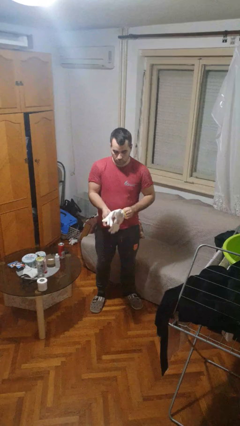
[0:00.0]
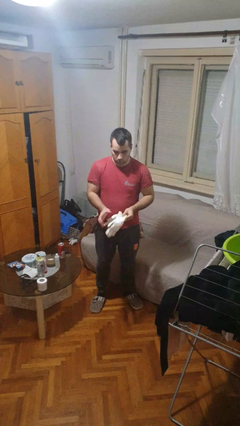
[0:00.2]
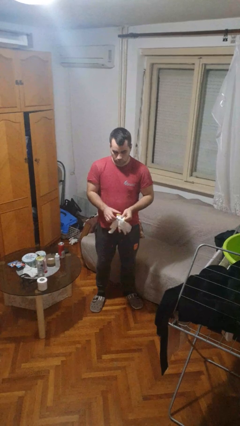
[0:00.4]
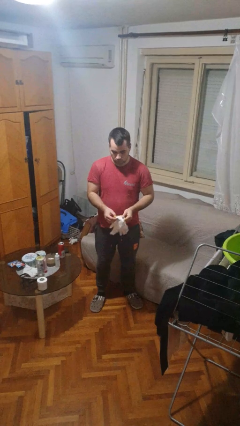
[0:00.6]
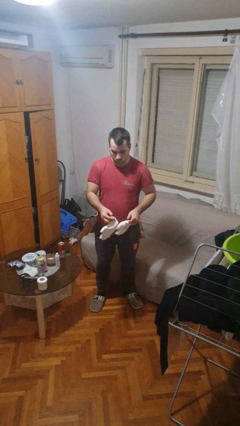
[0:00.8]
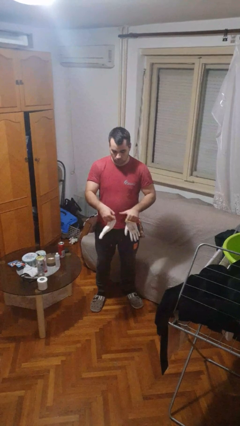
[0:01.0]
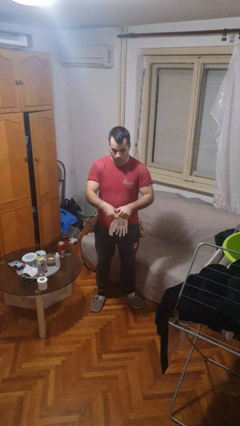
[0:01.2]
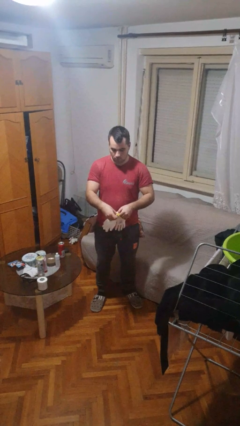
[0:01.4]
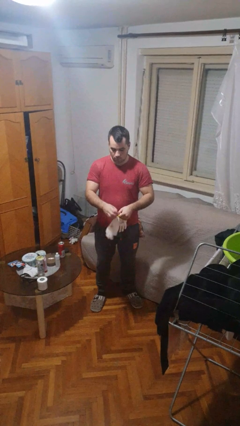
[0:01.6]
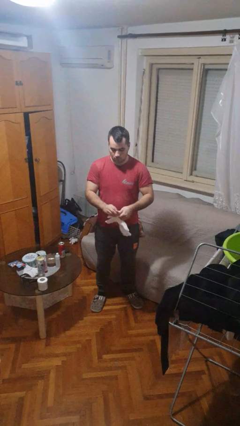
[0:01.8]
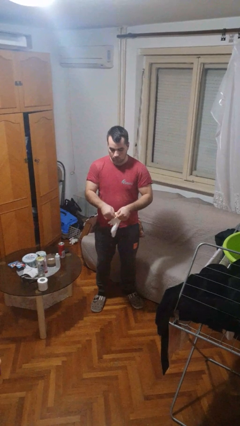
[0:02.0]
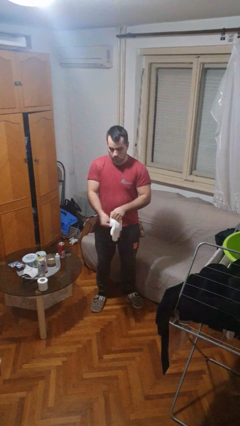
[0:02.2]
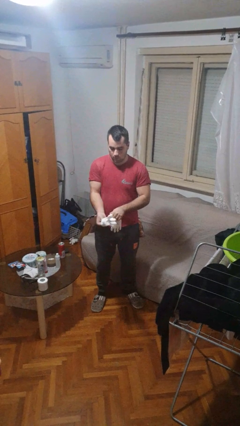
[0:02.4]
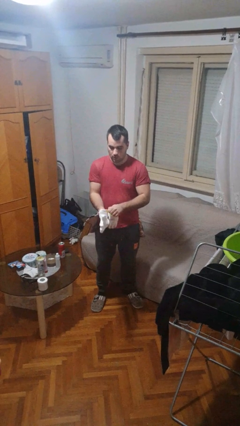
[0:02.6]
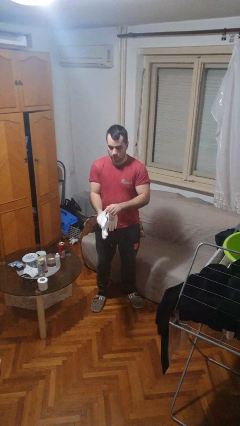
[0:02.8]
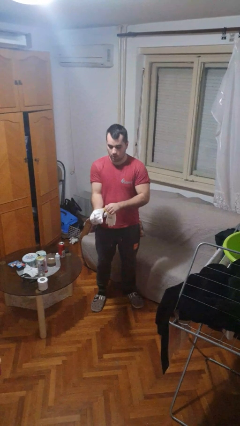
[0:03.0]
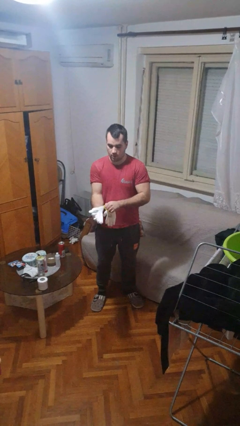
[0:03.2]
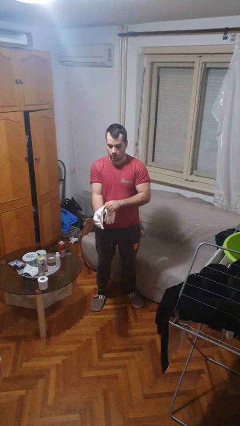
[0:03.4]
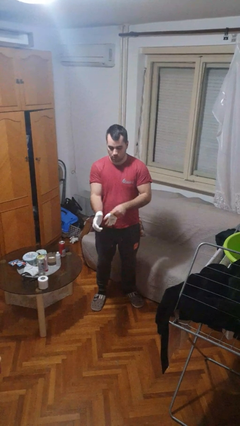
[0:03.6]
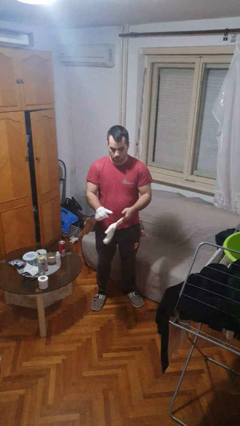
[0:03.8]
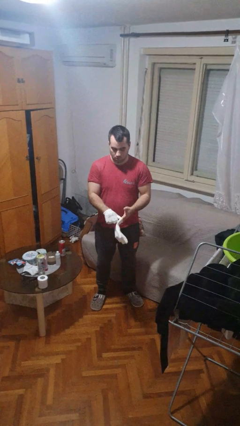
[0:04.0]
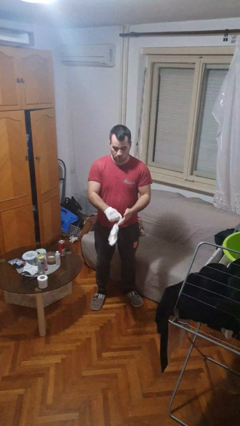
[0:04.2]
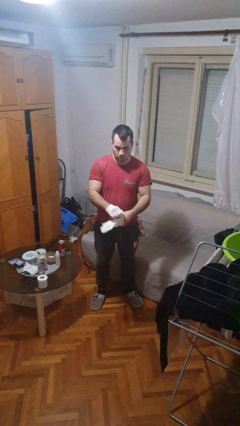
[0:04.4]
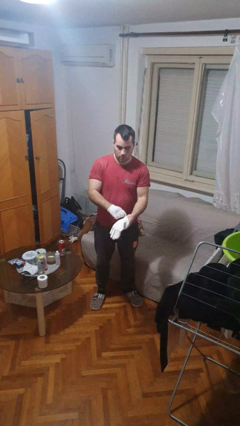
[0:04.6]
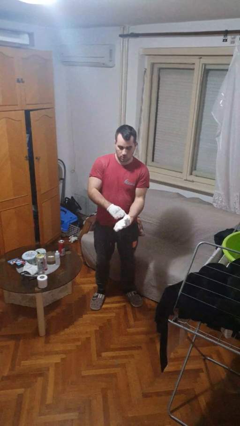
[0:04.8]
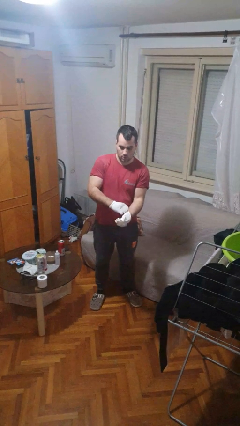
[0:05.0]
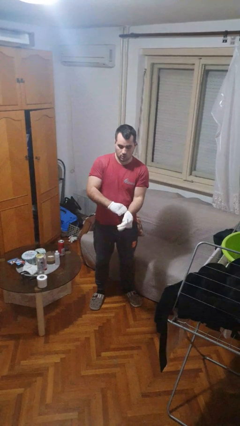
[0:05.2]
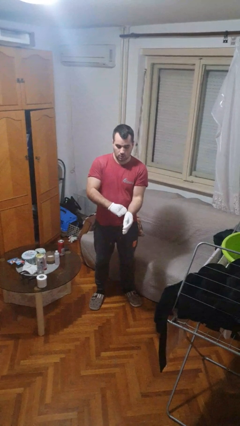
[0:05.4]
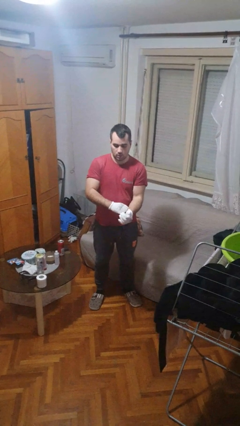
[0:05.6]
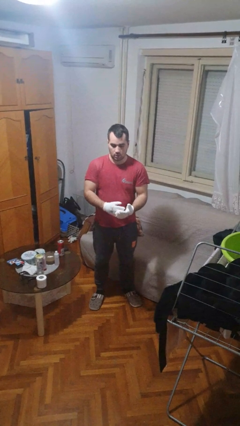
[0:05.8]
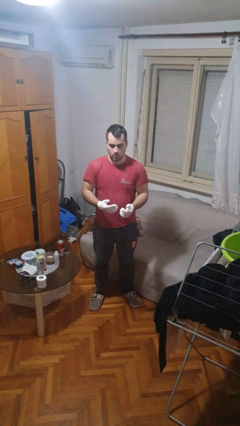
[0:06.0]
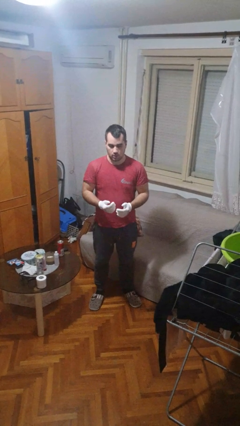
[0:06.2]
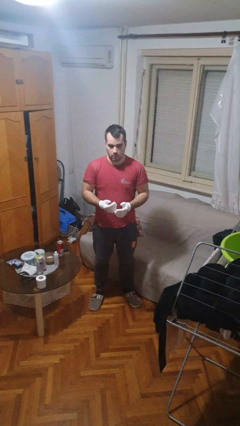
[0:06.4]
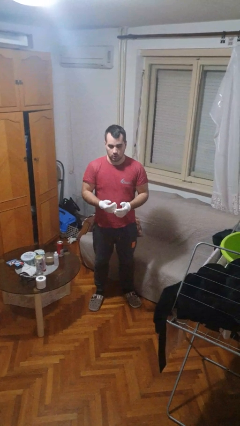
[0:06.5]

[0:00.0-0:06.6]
person puts on gloves

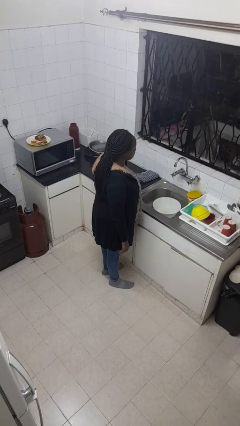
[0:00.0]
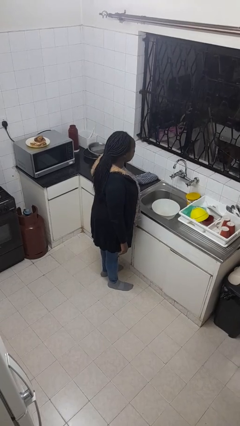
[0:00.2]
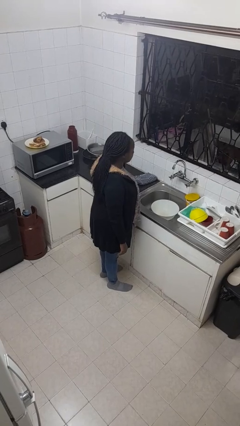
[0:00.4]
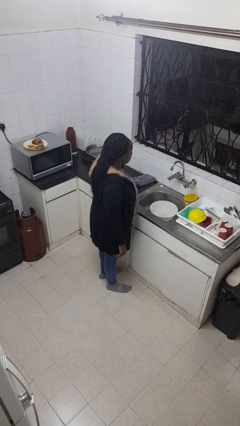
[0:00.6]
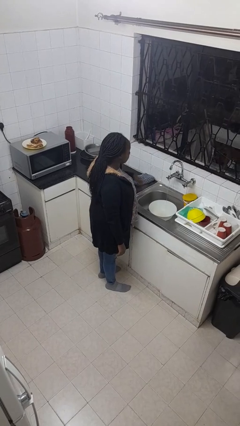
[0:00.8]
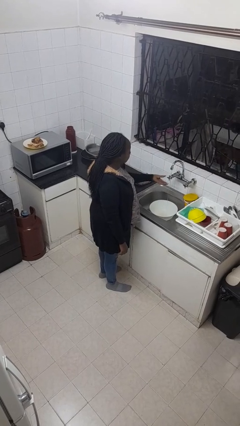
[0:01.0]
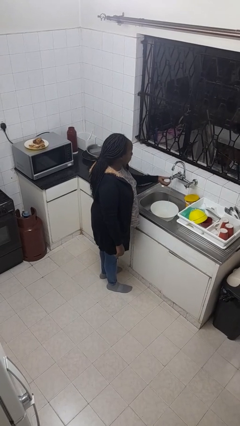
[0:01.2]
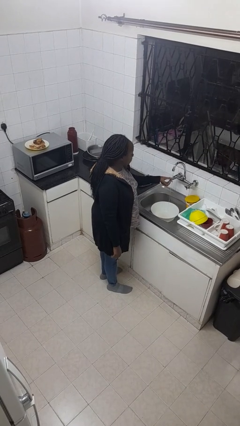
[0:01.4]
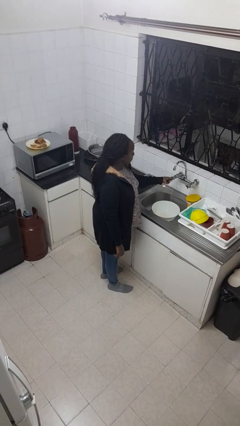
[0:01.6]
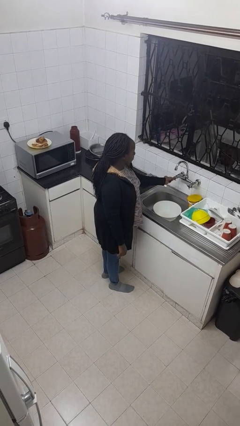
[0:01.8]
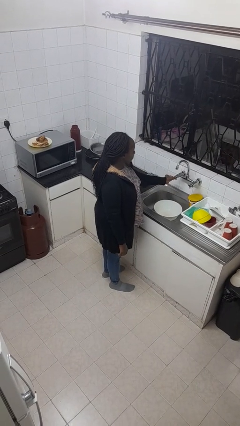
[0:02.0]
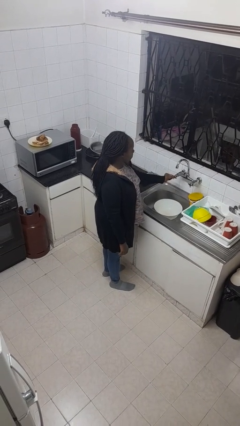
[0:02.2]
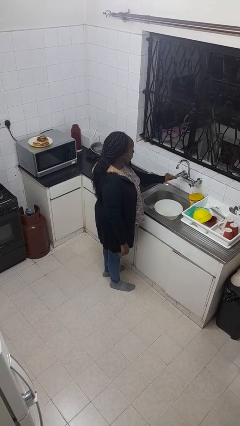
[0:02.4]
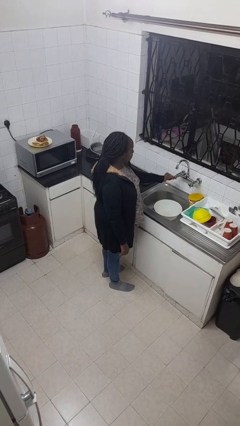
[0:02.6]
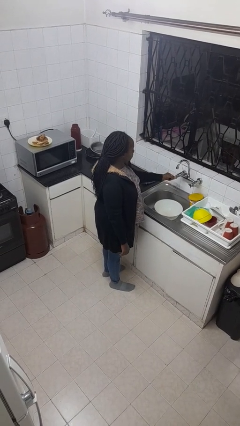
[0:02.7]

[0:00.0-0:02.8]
person turns off faucet

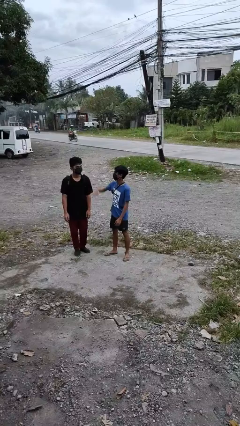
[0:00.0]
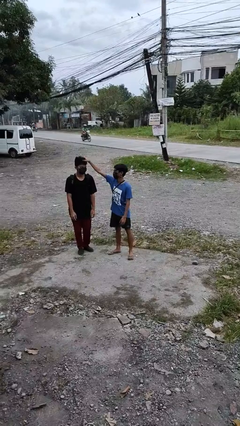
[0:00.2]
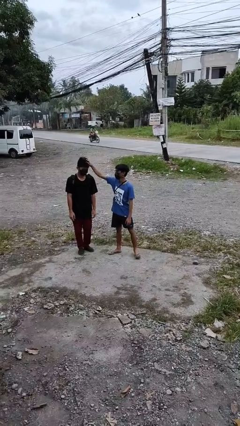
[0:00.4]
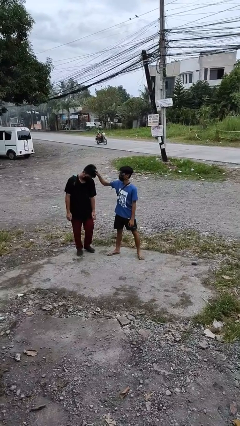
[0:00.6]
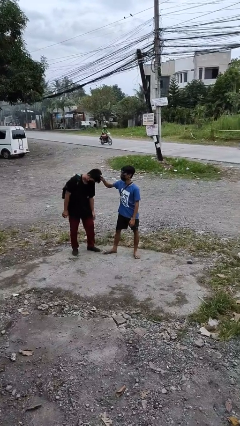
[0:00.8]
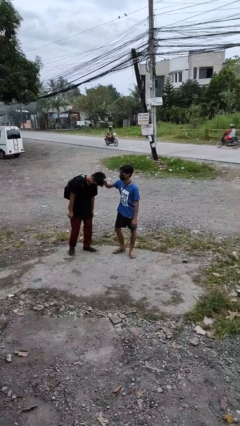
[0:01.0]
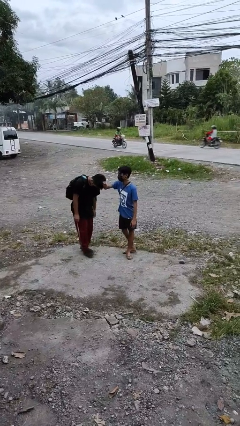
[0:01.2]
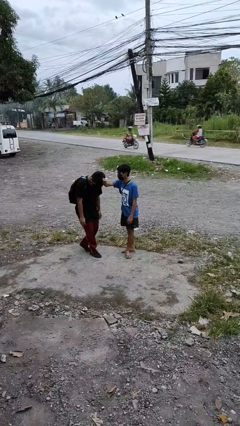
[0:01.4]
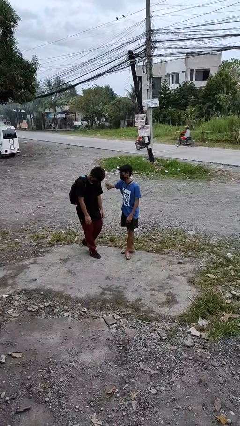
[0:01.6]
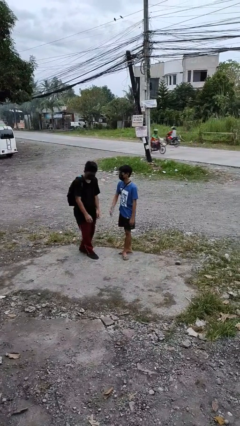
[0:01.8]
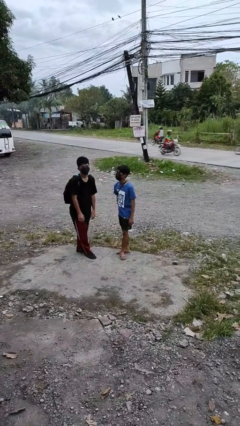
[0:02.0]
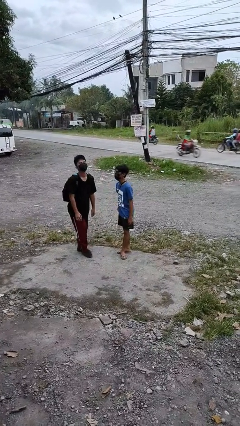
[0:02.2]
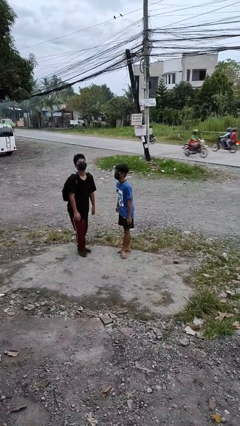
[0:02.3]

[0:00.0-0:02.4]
person grabs person by hair

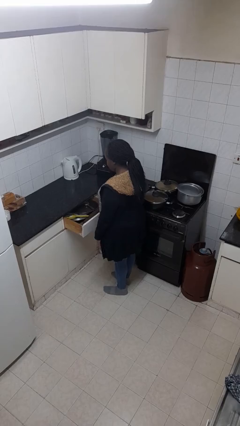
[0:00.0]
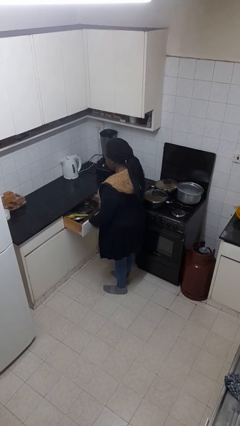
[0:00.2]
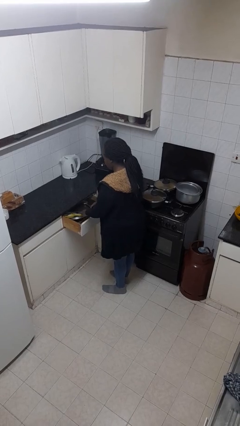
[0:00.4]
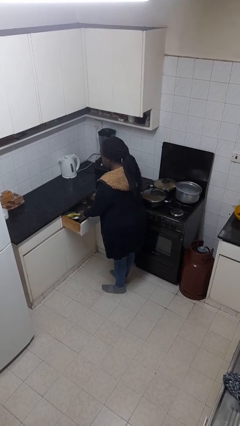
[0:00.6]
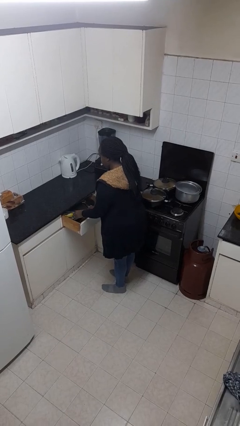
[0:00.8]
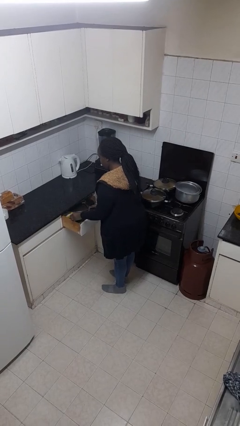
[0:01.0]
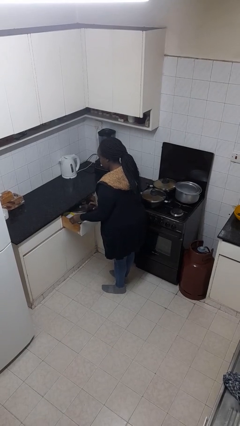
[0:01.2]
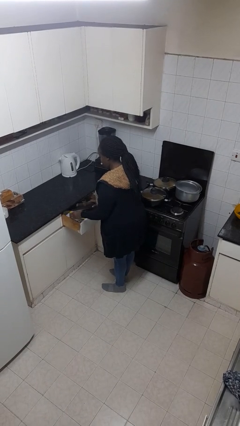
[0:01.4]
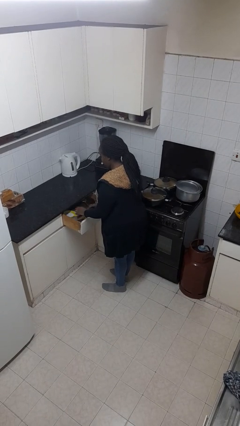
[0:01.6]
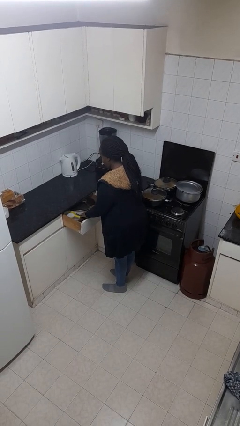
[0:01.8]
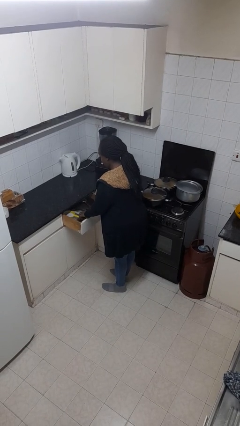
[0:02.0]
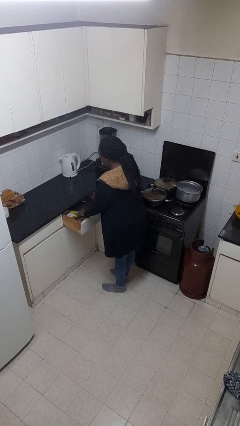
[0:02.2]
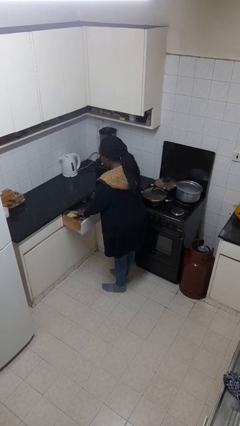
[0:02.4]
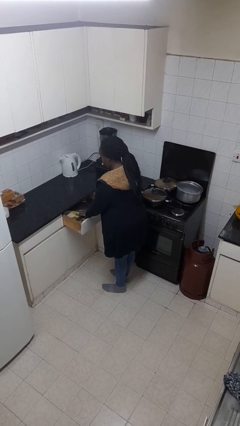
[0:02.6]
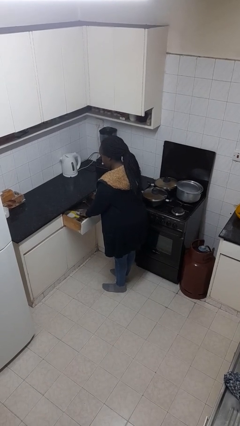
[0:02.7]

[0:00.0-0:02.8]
person searches in kitchen drawer

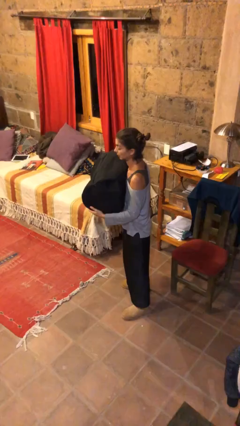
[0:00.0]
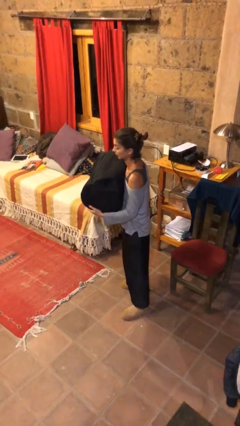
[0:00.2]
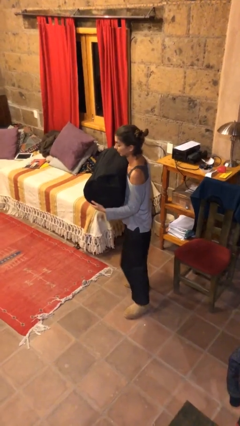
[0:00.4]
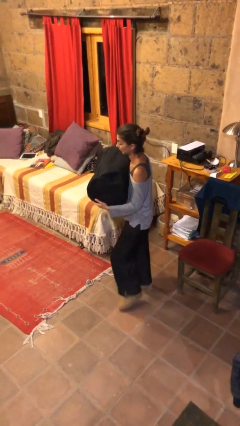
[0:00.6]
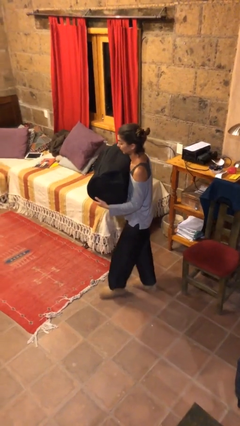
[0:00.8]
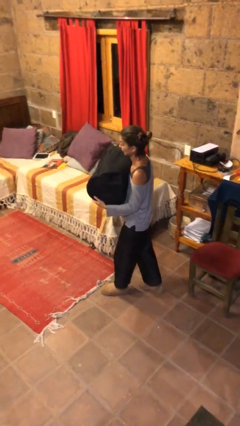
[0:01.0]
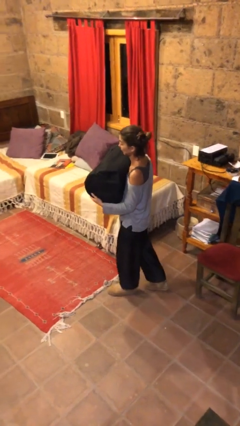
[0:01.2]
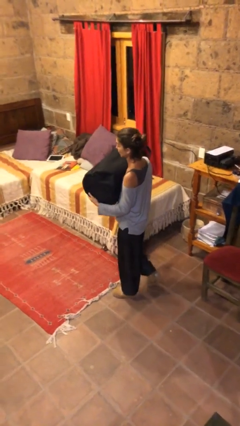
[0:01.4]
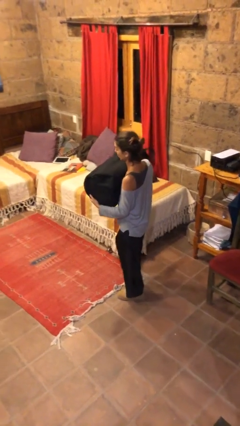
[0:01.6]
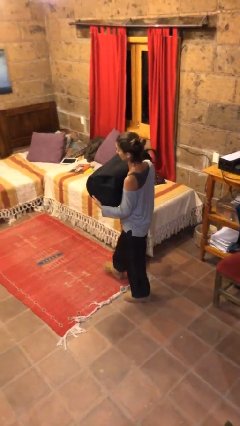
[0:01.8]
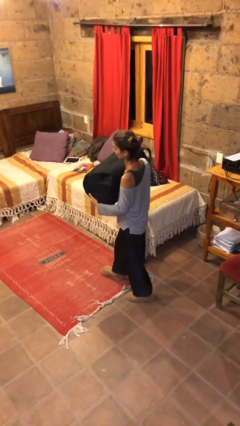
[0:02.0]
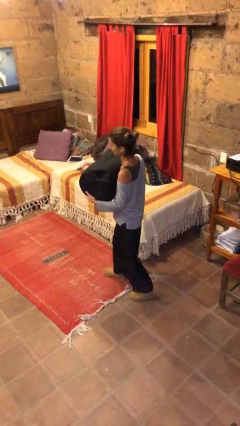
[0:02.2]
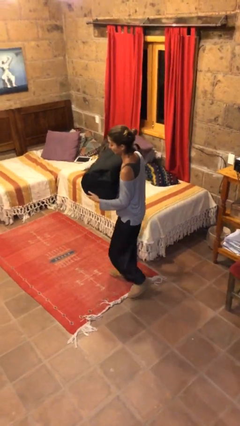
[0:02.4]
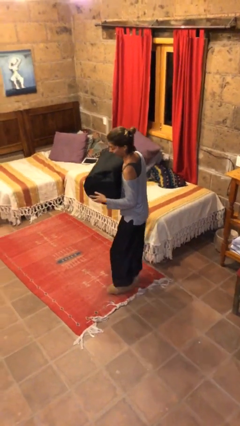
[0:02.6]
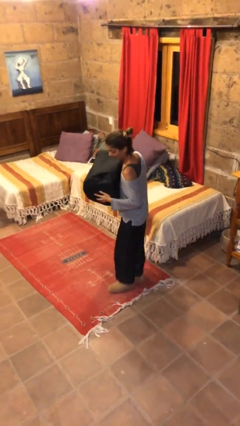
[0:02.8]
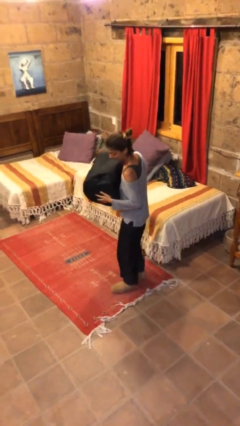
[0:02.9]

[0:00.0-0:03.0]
person carries heavy object
